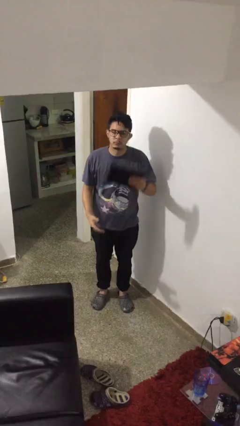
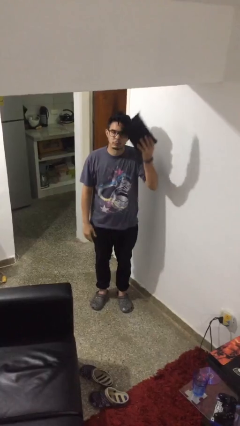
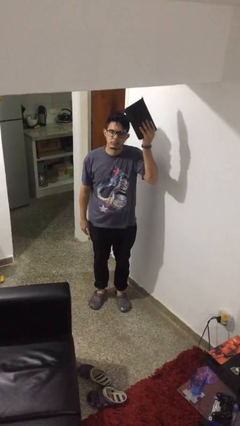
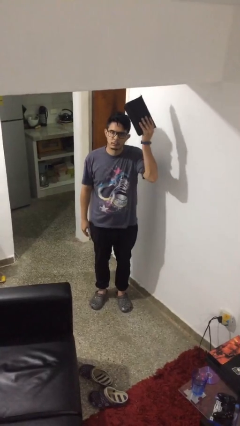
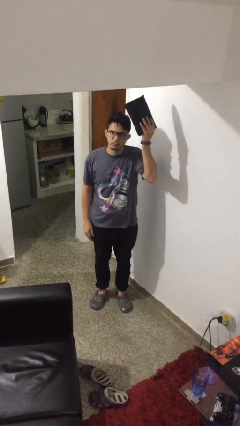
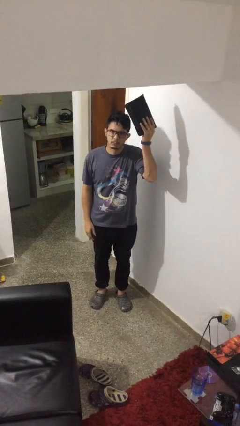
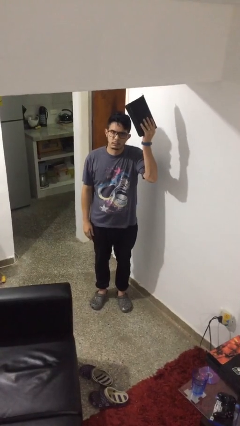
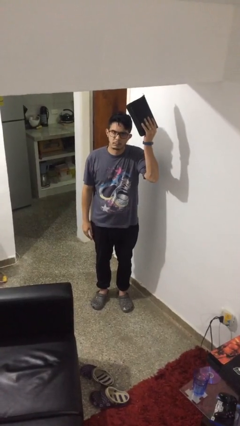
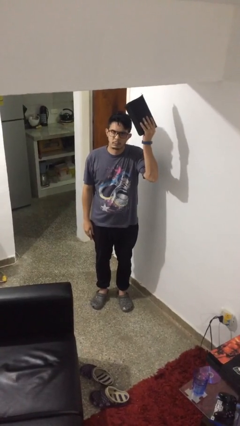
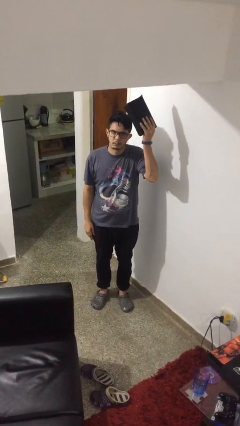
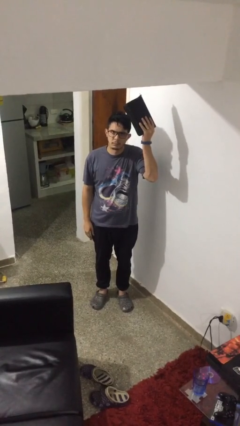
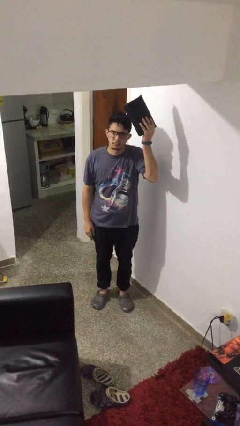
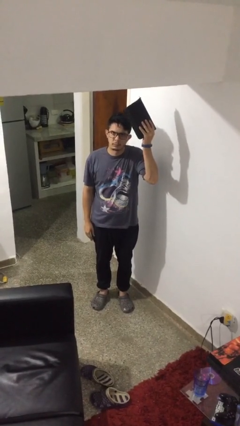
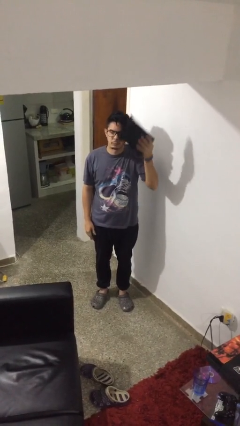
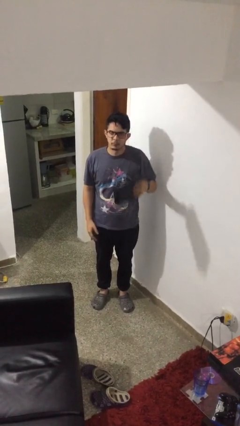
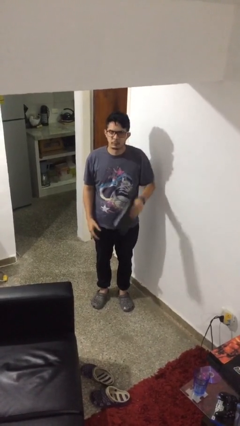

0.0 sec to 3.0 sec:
person holds object above head

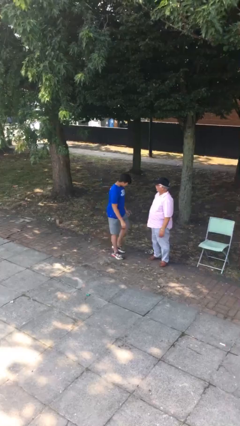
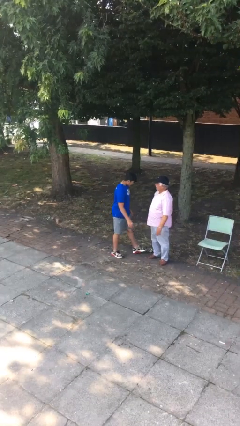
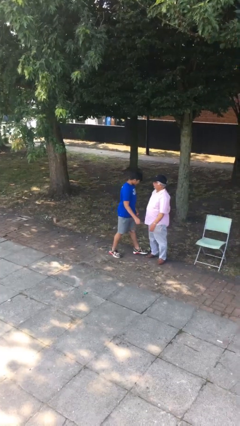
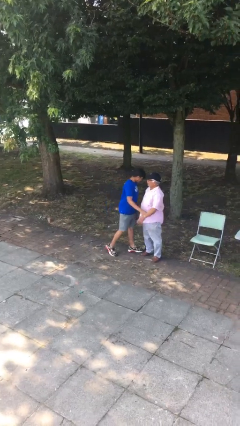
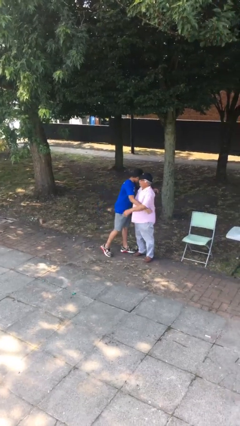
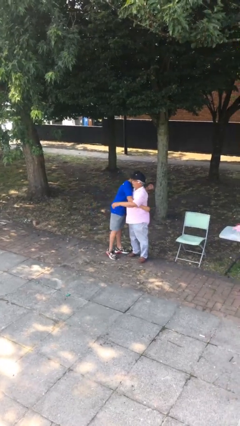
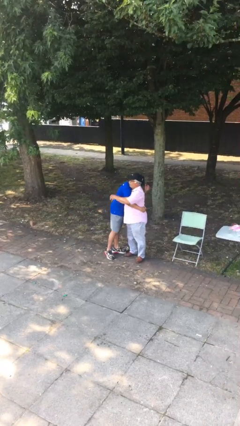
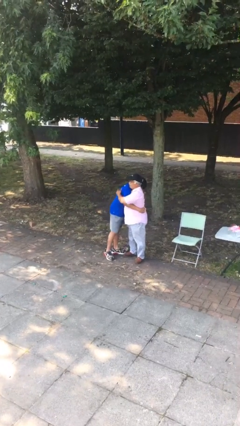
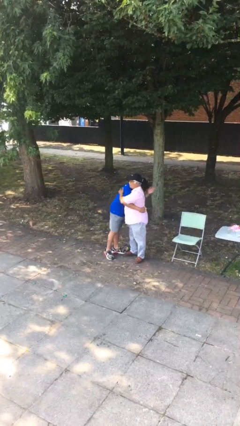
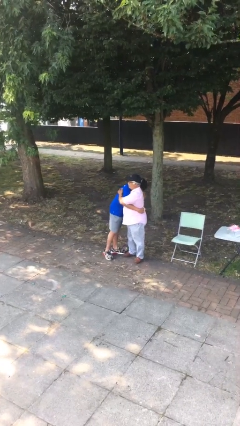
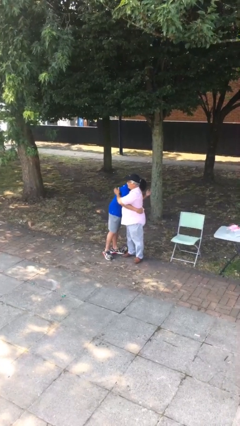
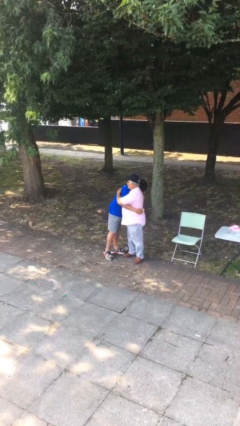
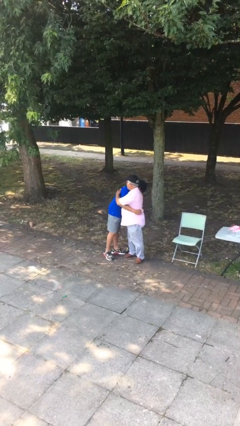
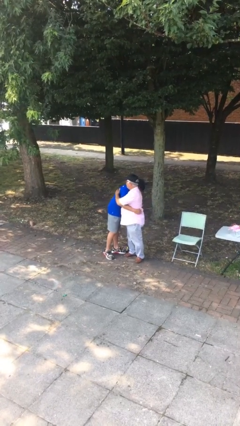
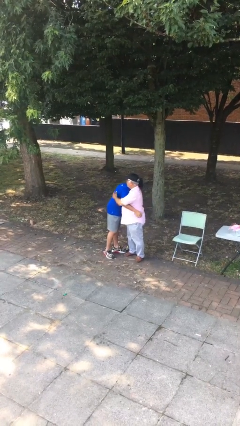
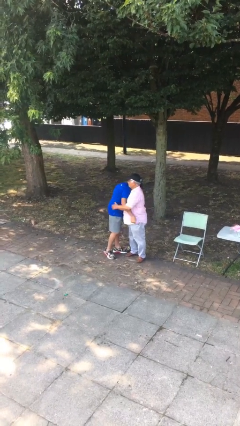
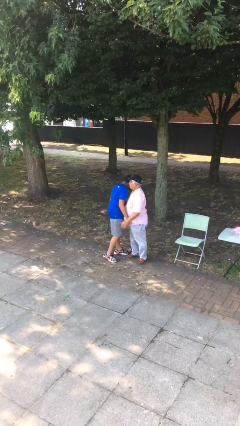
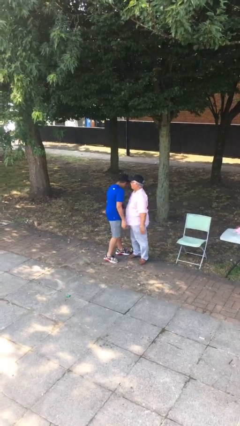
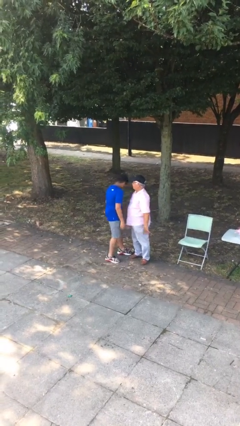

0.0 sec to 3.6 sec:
person embraces person

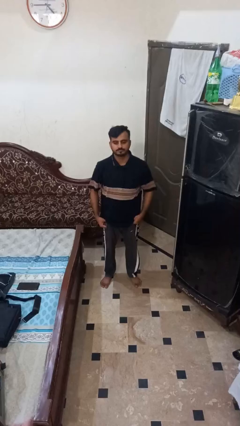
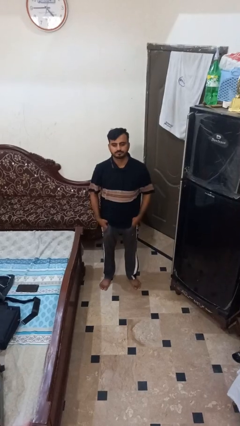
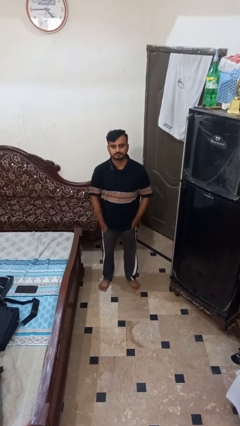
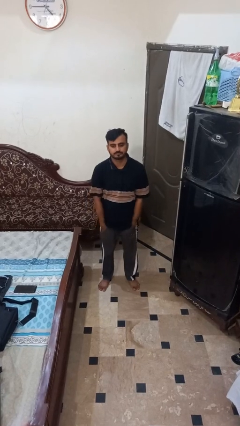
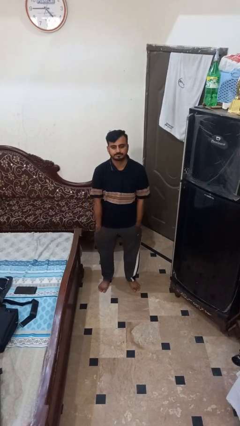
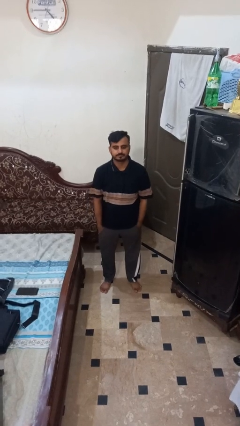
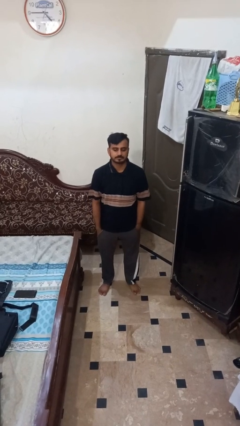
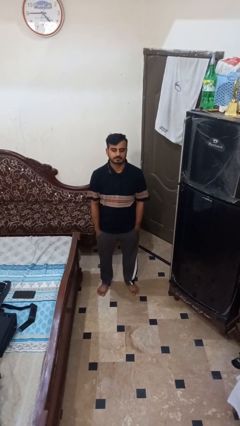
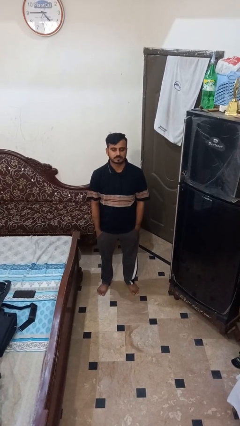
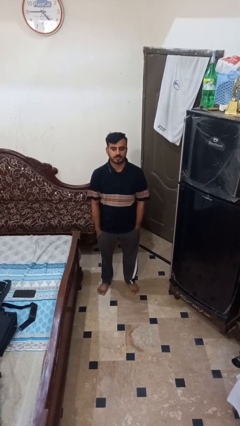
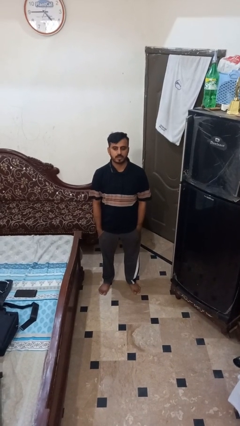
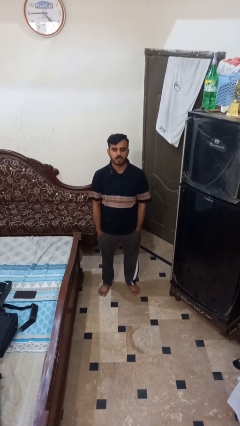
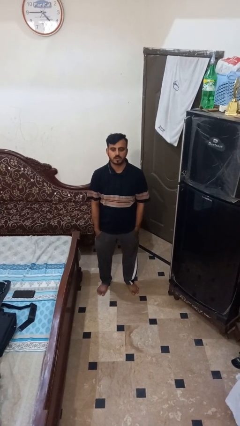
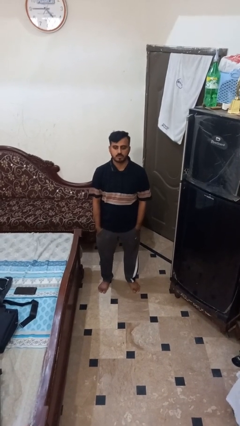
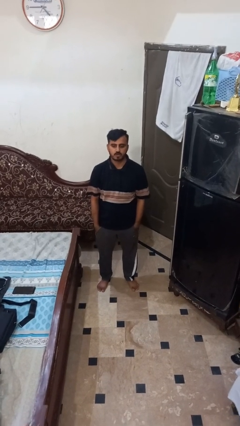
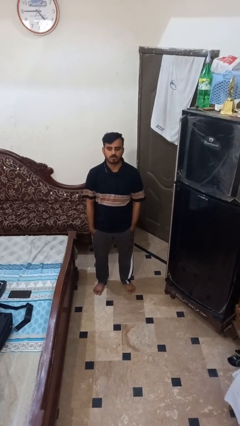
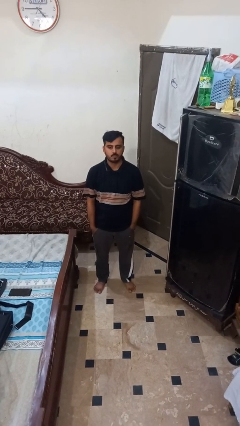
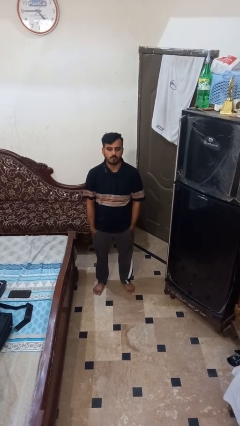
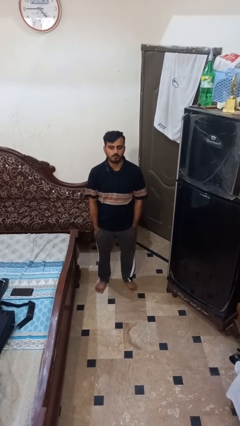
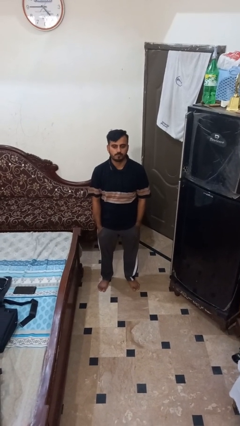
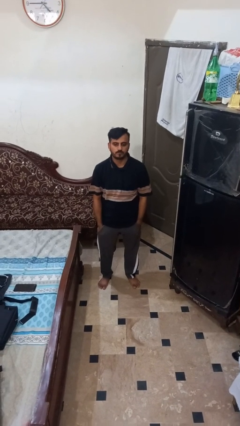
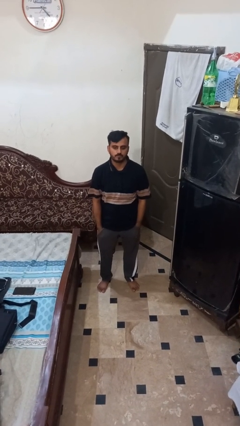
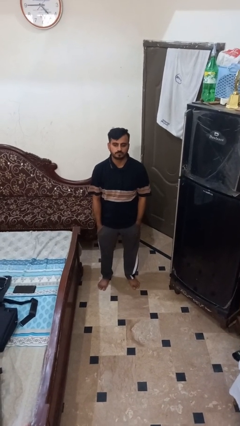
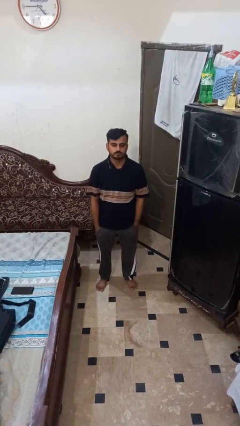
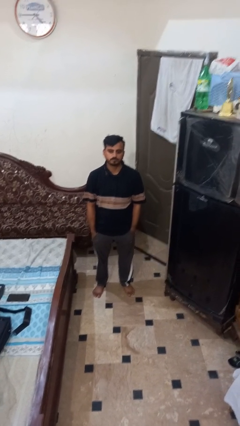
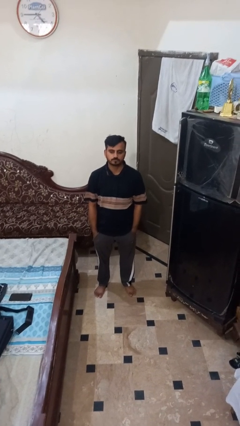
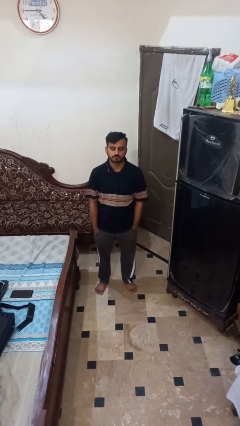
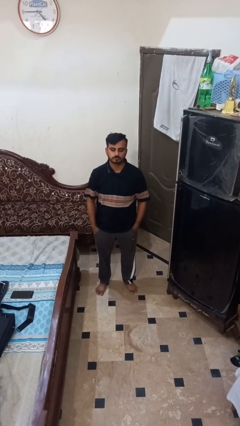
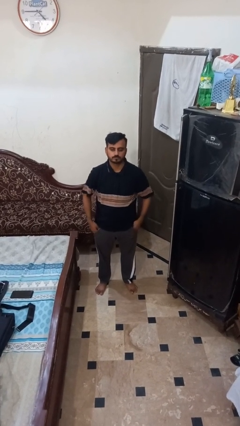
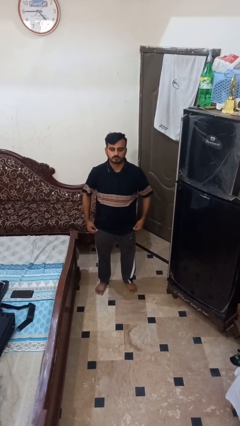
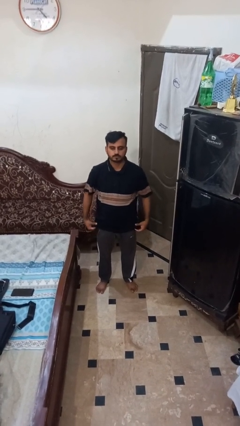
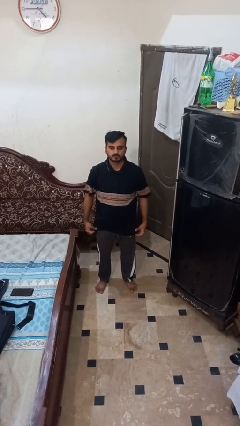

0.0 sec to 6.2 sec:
person puts hands in back pockets

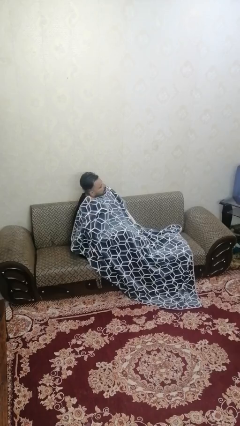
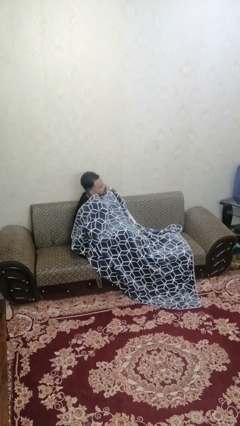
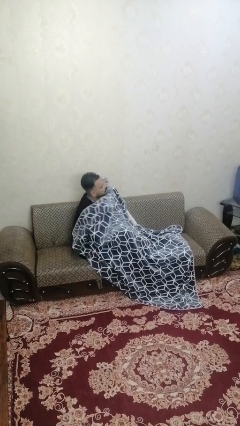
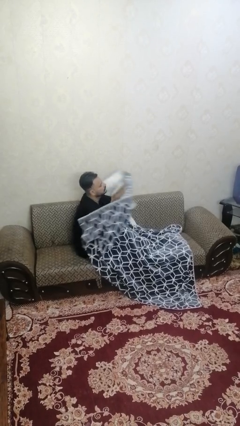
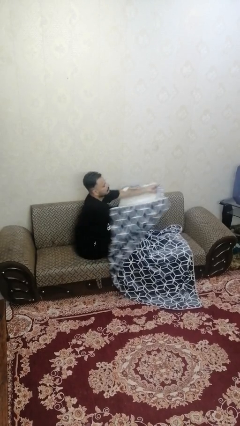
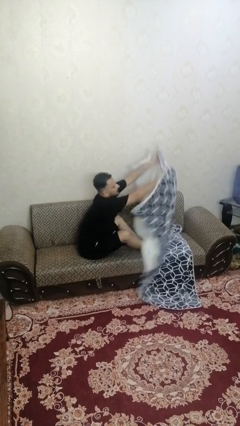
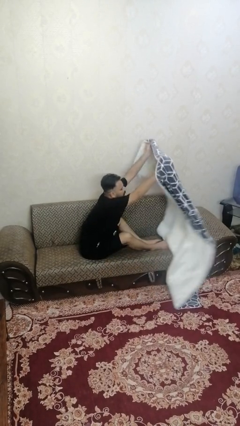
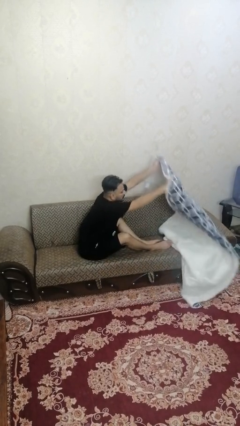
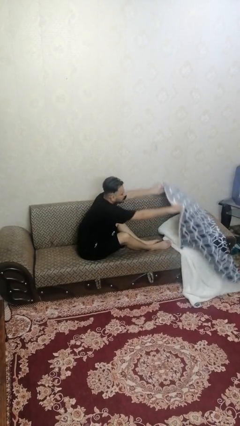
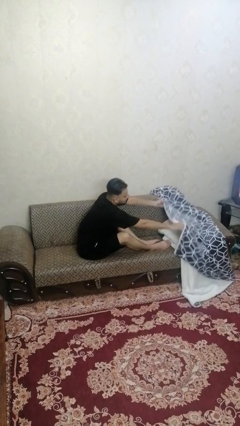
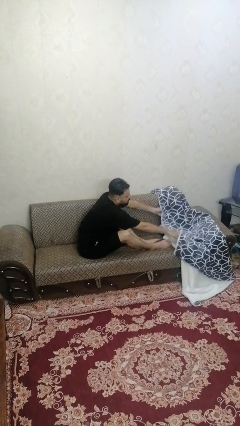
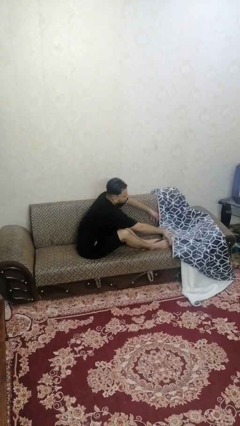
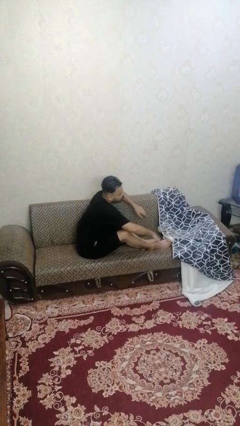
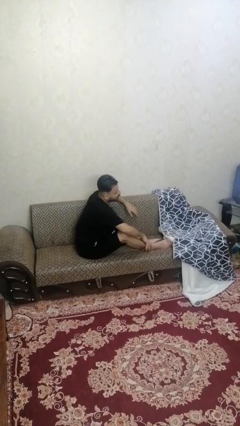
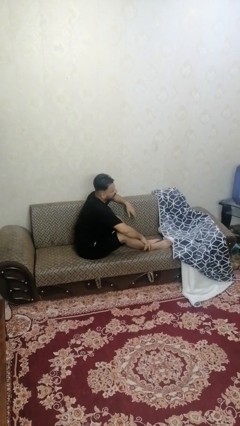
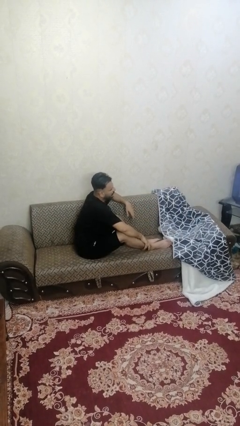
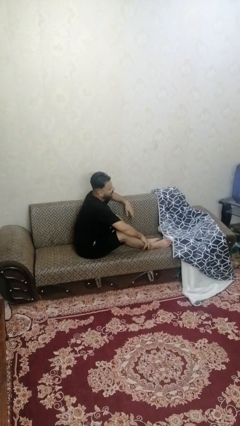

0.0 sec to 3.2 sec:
person uncovers with blanket

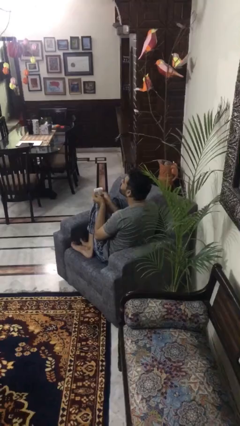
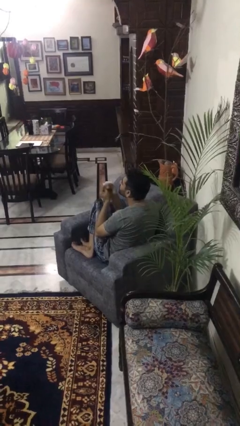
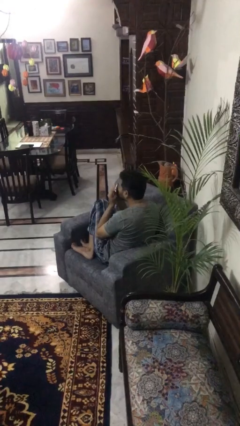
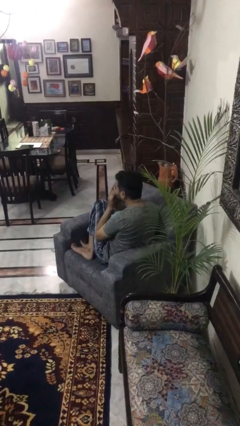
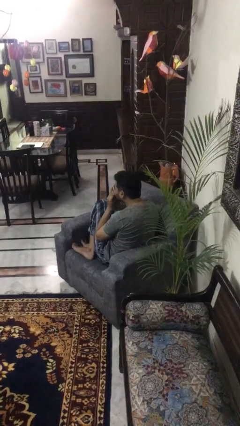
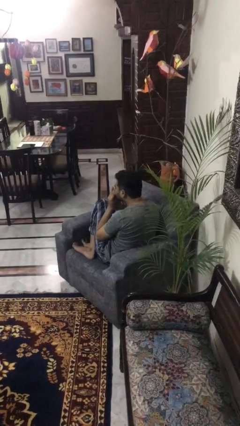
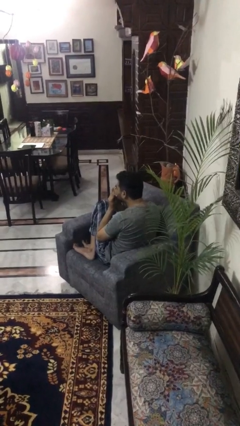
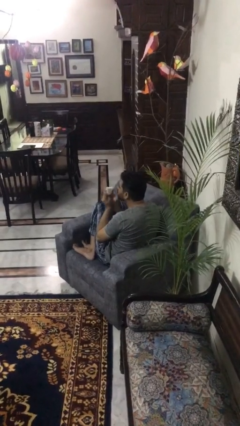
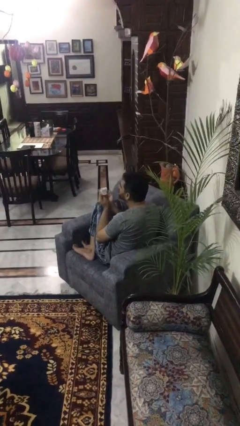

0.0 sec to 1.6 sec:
person blows nose
